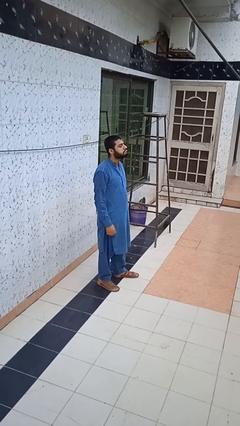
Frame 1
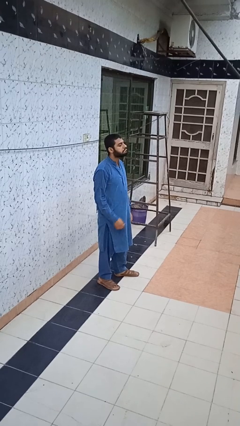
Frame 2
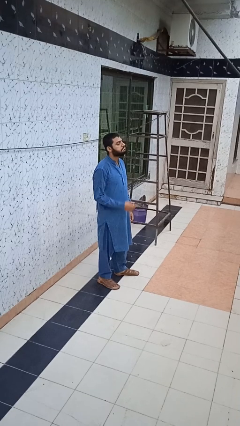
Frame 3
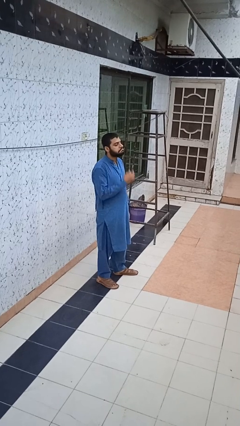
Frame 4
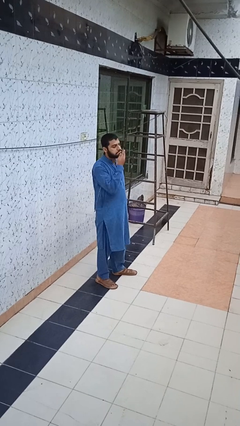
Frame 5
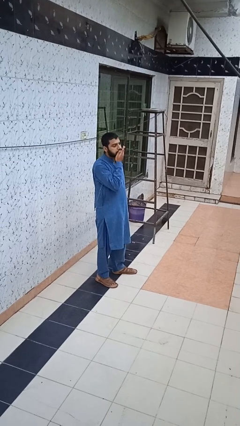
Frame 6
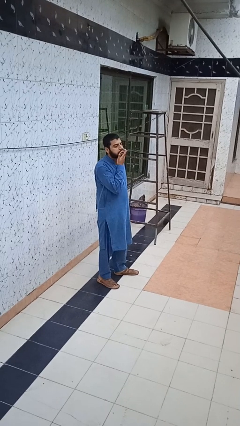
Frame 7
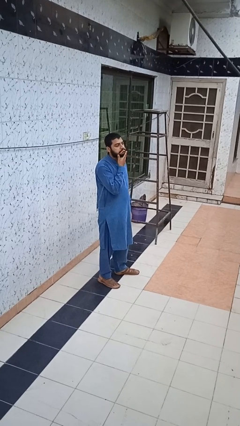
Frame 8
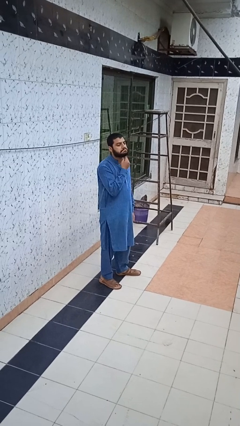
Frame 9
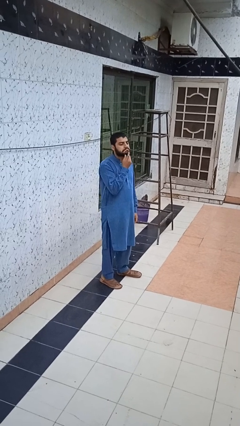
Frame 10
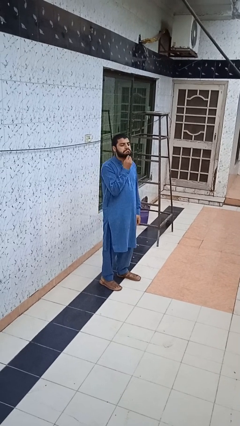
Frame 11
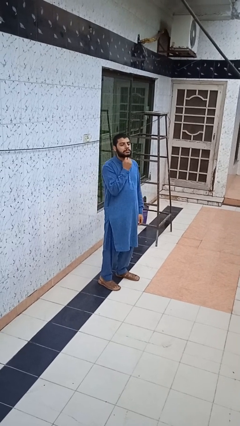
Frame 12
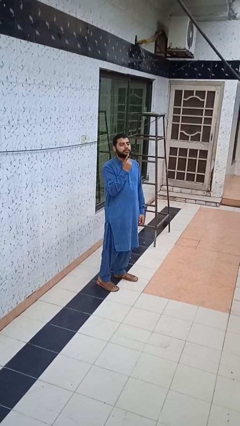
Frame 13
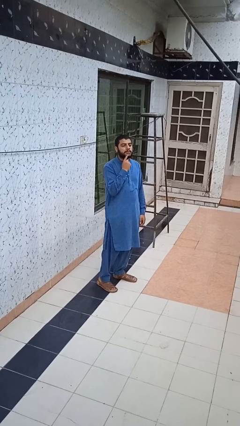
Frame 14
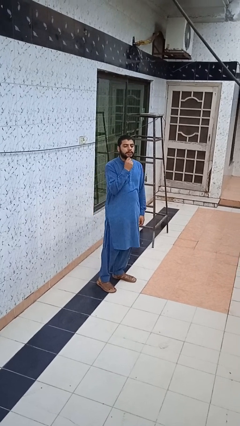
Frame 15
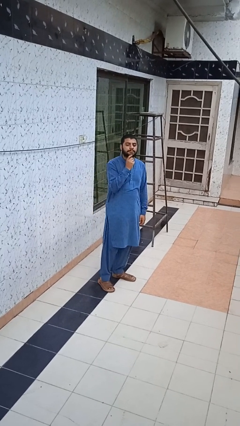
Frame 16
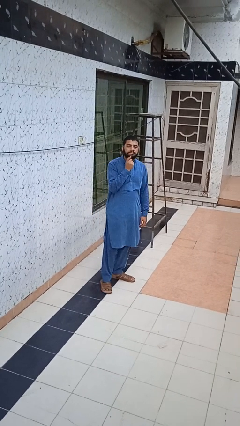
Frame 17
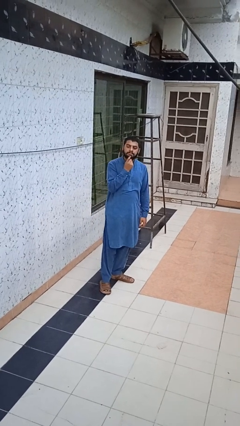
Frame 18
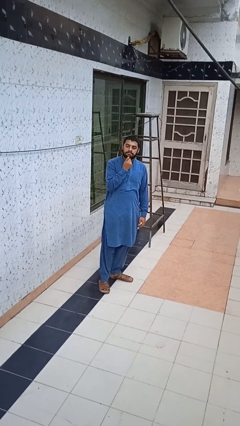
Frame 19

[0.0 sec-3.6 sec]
person strokes chin

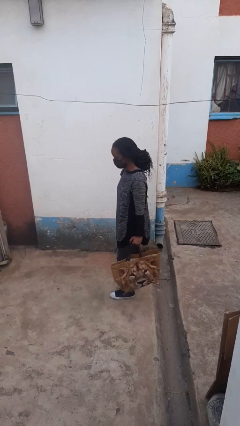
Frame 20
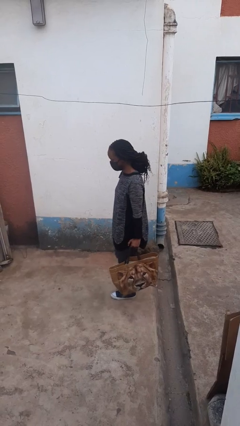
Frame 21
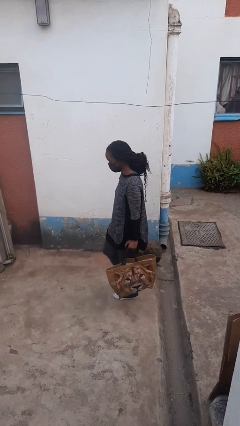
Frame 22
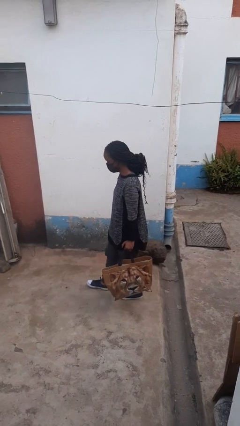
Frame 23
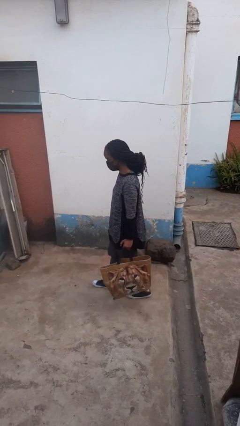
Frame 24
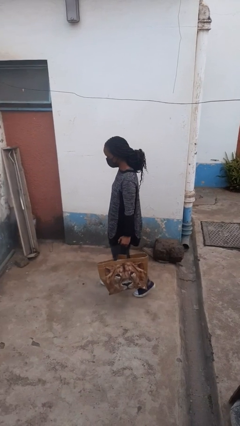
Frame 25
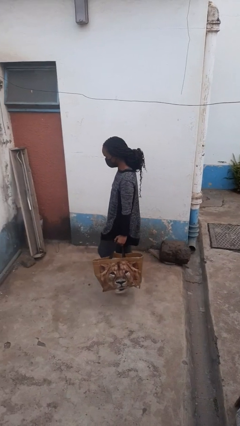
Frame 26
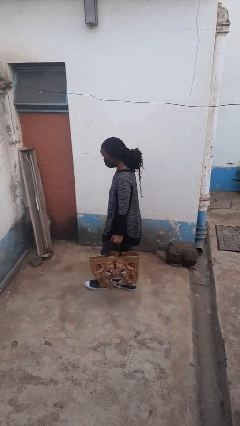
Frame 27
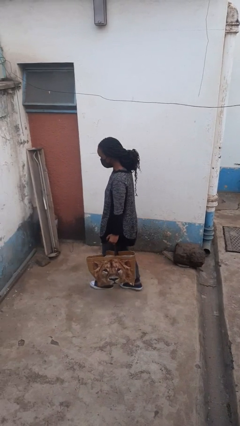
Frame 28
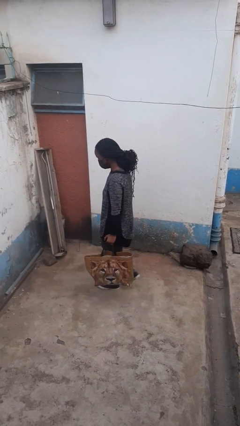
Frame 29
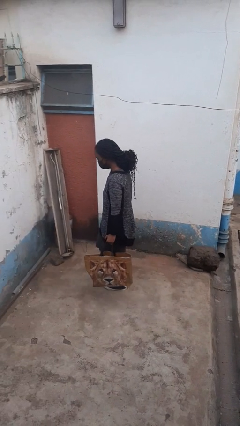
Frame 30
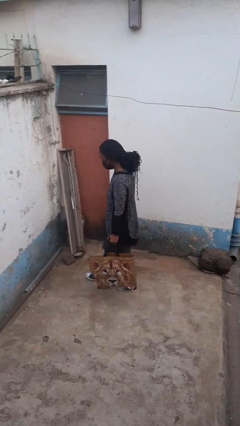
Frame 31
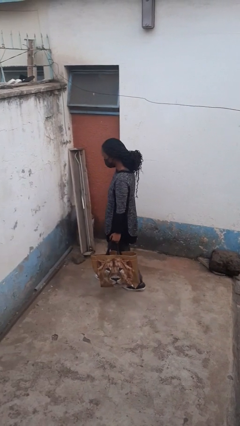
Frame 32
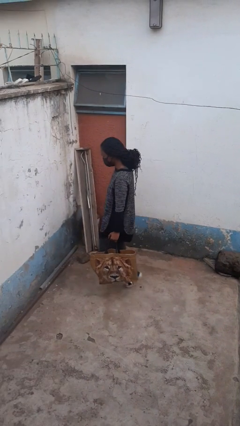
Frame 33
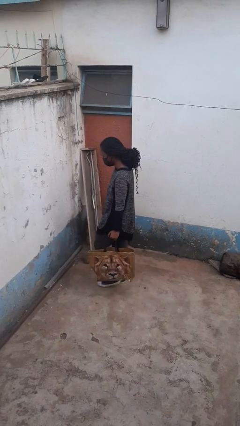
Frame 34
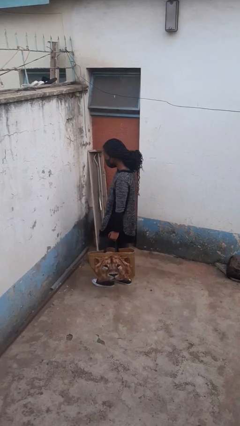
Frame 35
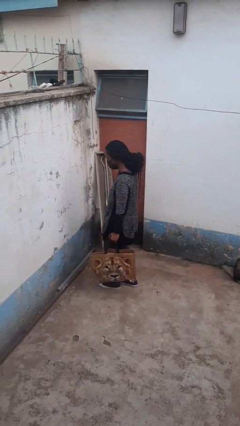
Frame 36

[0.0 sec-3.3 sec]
person carries groceries

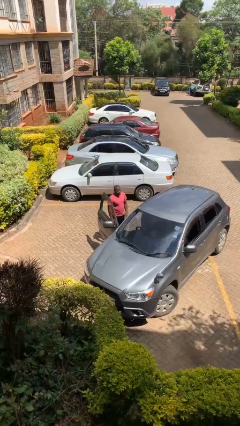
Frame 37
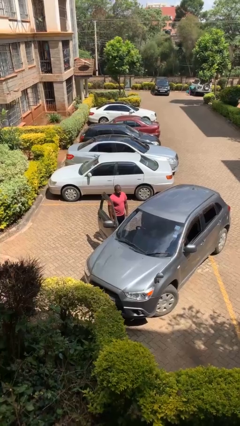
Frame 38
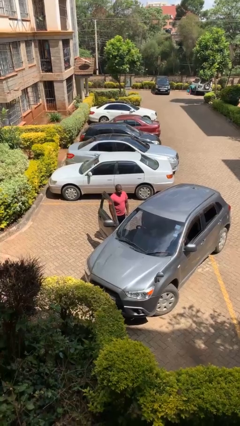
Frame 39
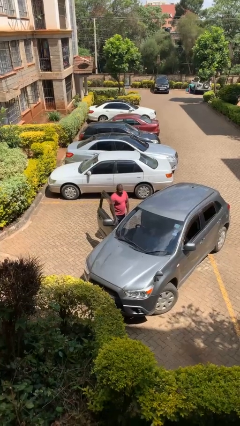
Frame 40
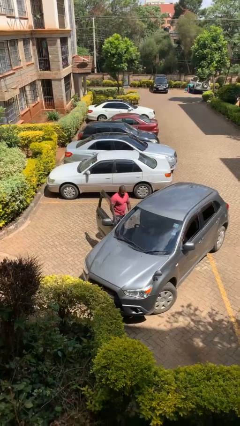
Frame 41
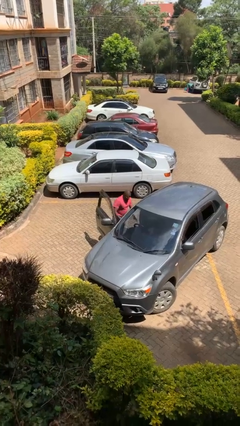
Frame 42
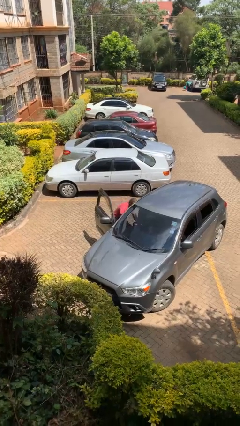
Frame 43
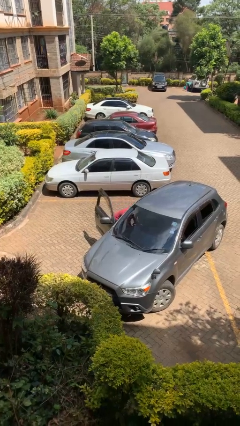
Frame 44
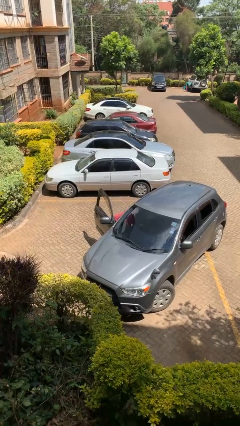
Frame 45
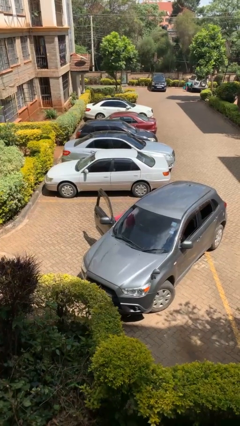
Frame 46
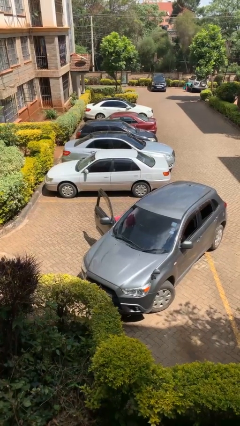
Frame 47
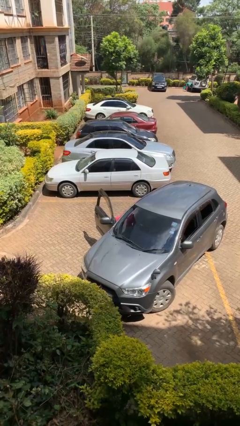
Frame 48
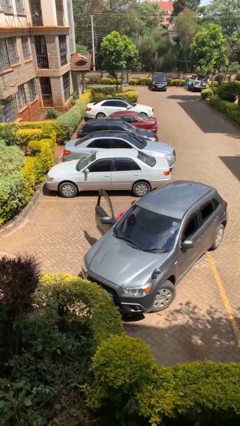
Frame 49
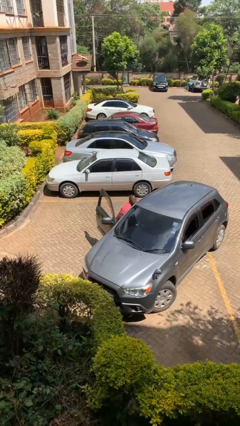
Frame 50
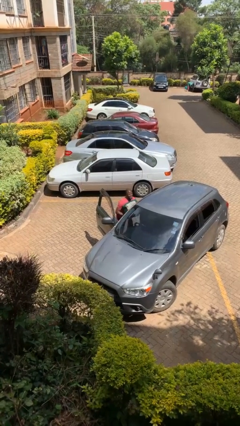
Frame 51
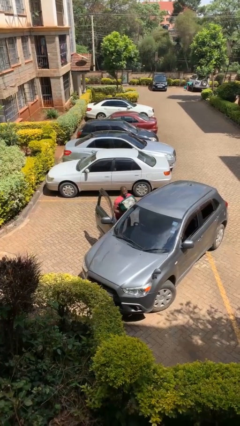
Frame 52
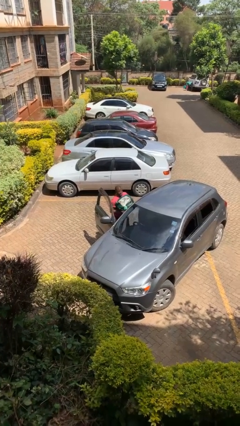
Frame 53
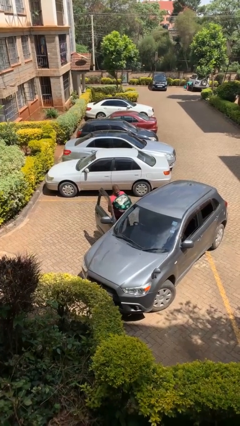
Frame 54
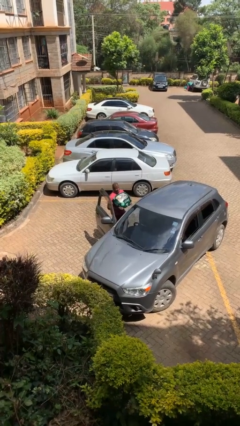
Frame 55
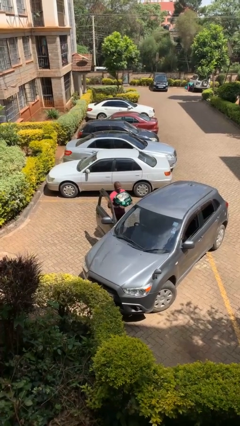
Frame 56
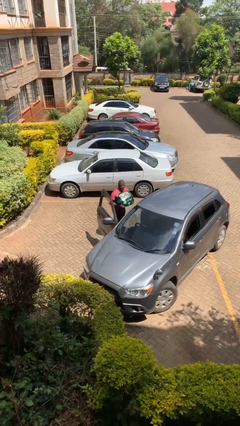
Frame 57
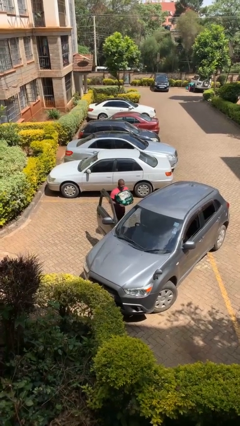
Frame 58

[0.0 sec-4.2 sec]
person unloads car

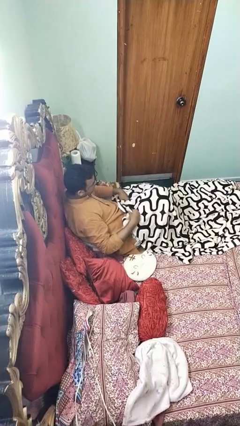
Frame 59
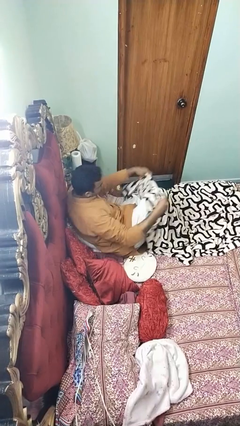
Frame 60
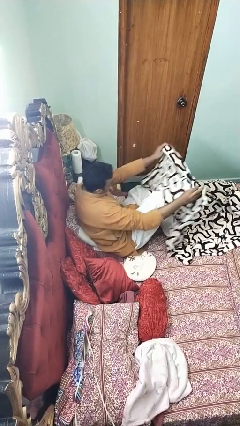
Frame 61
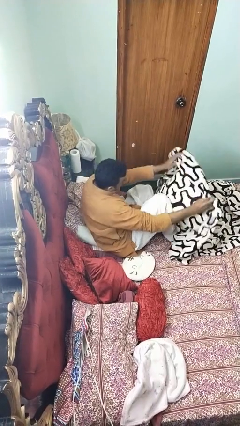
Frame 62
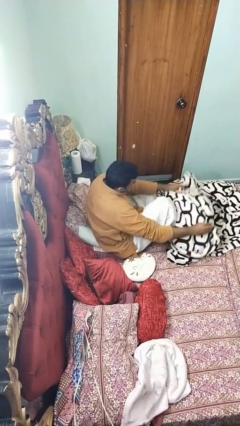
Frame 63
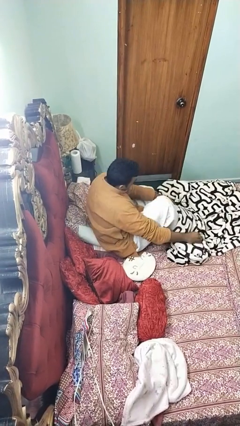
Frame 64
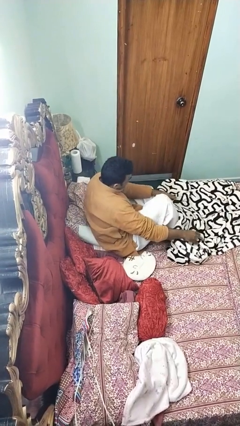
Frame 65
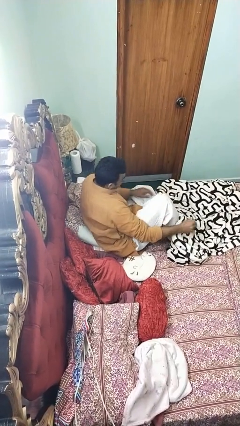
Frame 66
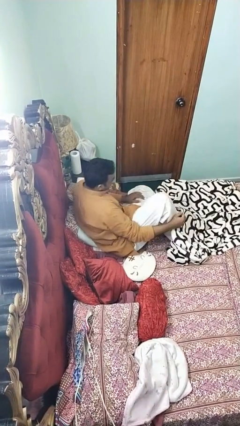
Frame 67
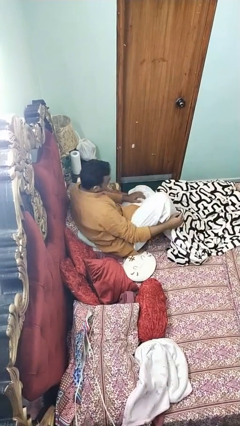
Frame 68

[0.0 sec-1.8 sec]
person uncovers with blanket

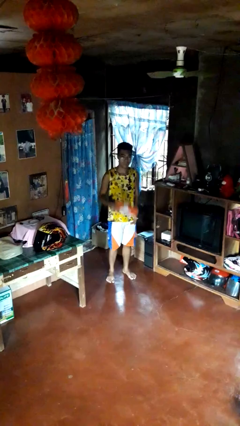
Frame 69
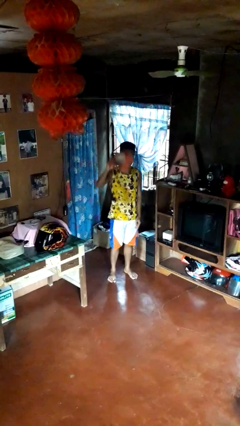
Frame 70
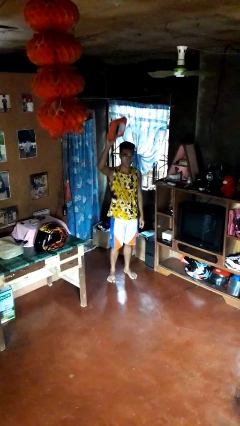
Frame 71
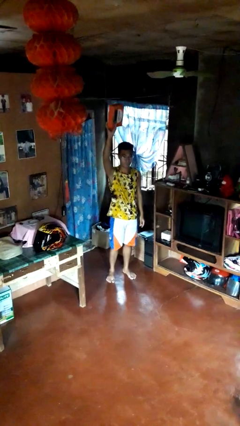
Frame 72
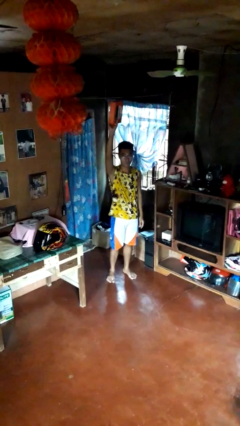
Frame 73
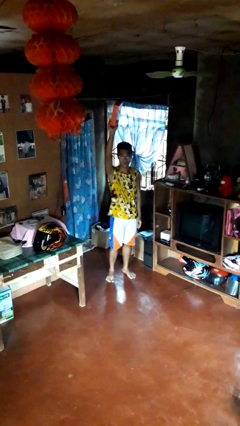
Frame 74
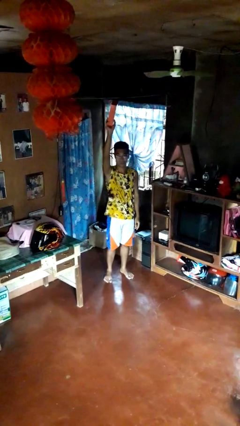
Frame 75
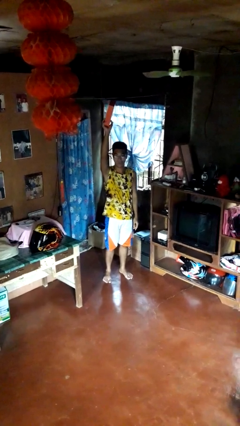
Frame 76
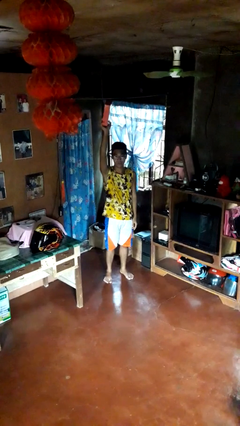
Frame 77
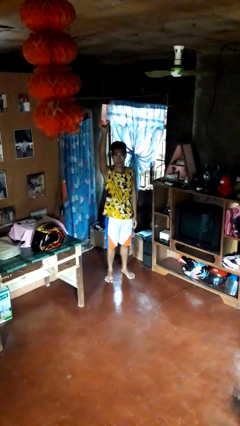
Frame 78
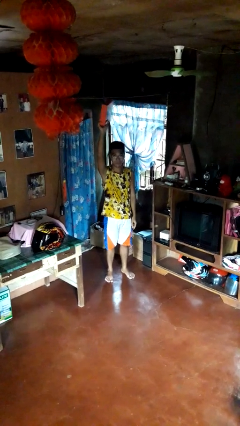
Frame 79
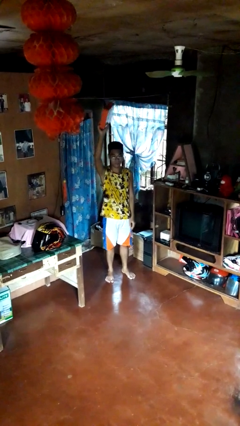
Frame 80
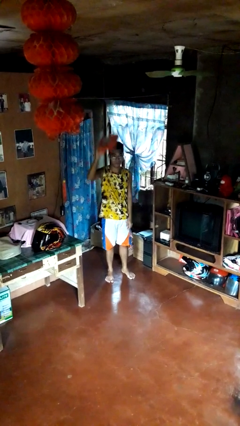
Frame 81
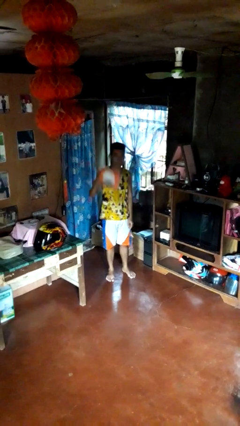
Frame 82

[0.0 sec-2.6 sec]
person holds object above head

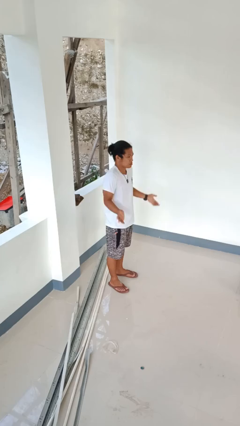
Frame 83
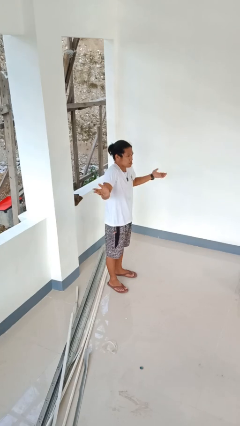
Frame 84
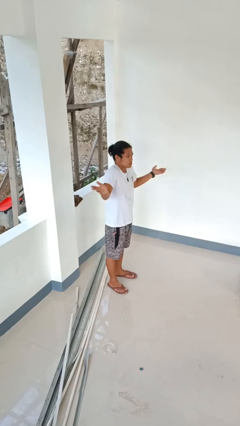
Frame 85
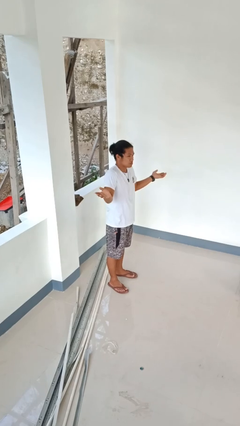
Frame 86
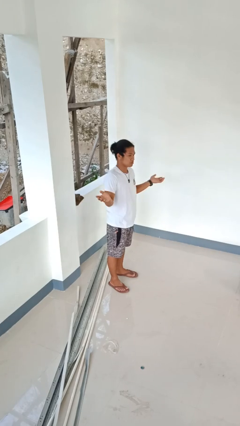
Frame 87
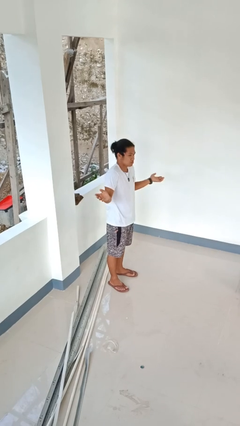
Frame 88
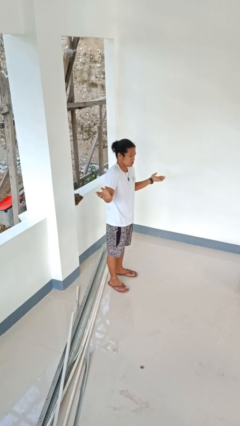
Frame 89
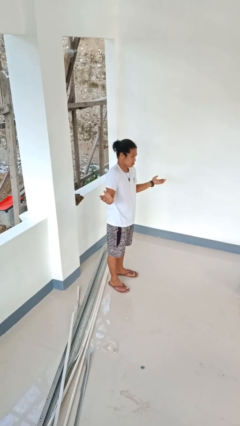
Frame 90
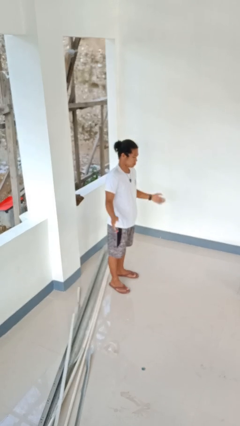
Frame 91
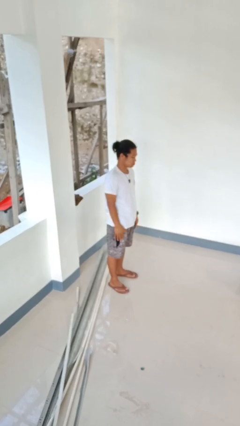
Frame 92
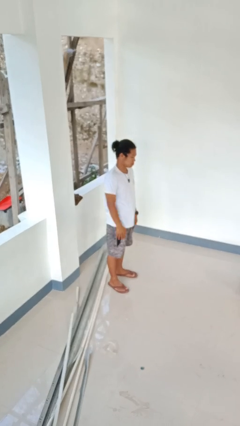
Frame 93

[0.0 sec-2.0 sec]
person shrugs
